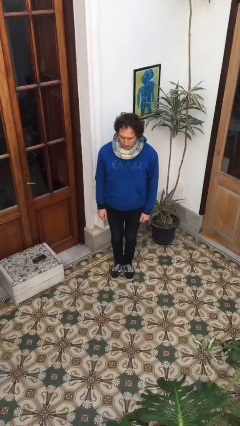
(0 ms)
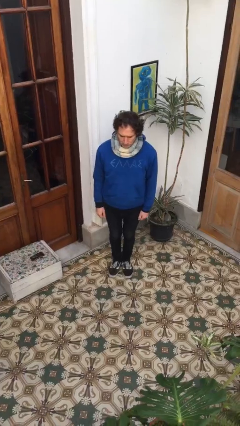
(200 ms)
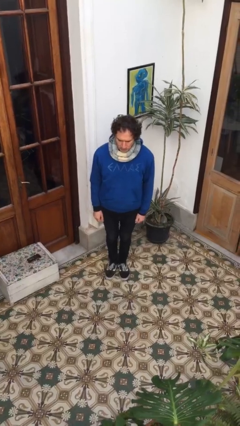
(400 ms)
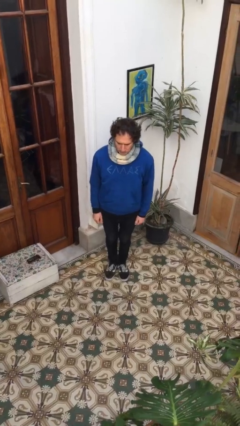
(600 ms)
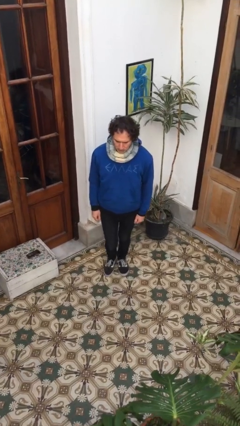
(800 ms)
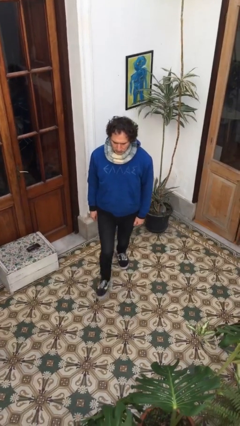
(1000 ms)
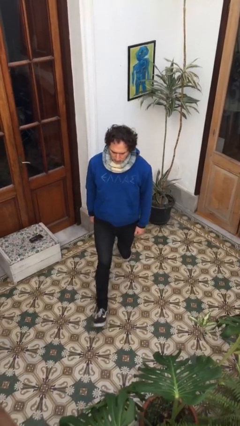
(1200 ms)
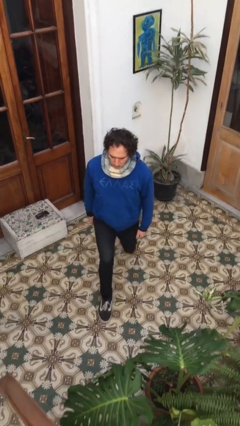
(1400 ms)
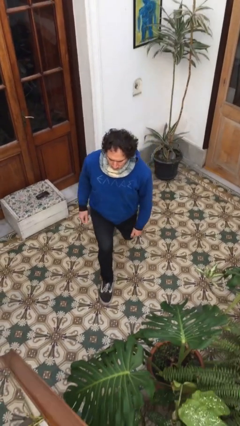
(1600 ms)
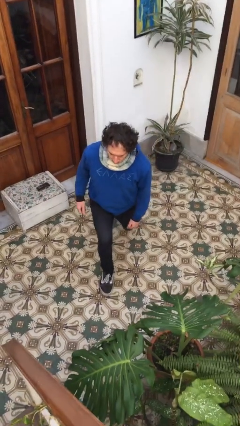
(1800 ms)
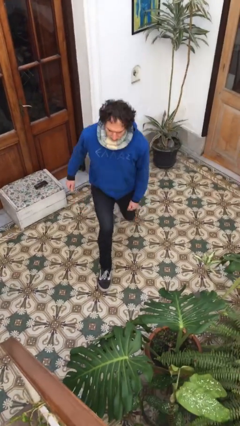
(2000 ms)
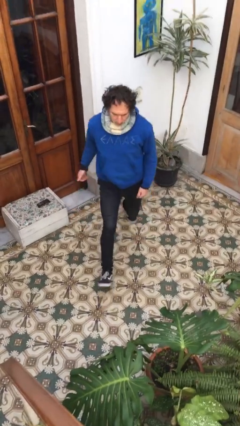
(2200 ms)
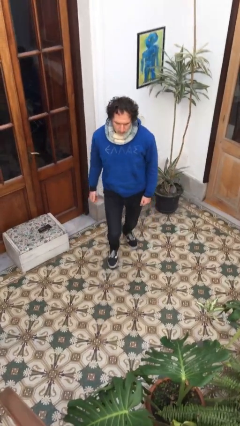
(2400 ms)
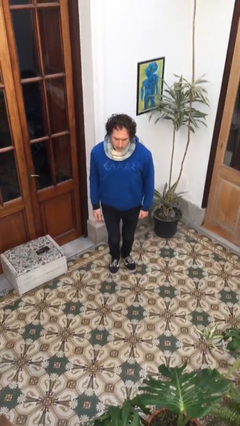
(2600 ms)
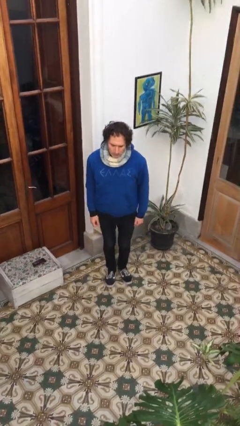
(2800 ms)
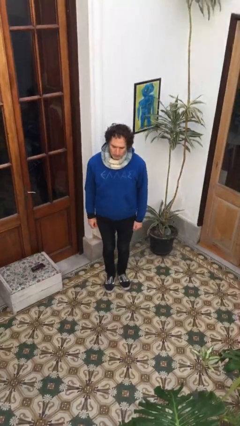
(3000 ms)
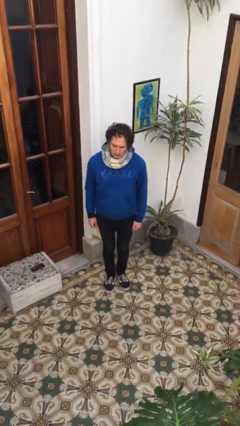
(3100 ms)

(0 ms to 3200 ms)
person exercises with lunges

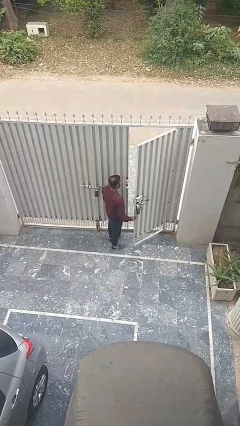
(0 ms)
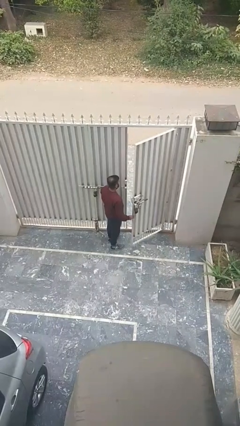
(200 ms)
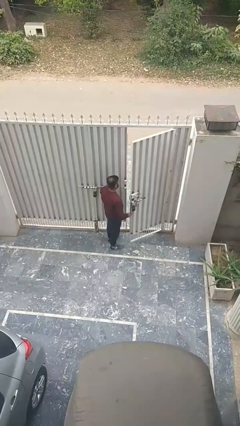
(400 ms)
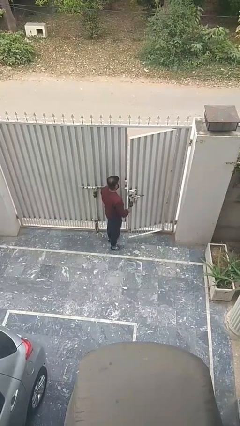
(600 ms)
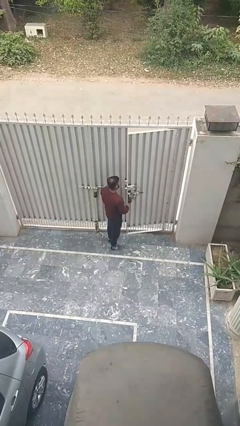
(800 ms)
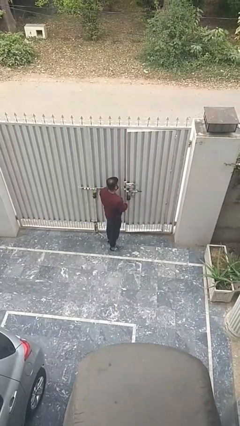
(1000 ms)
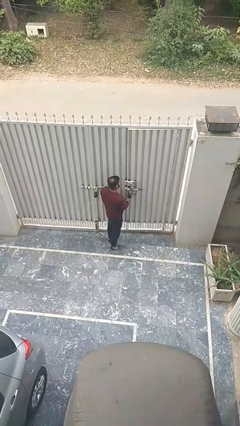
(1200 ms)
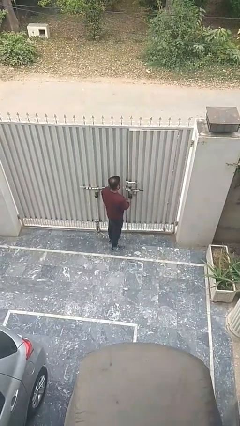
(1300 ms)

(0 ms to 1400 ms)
person closes facility door

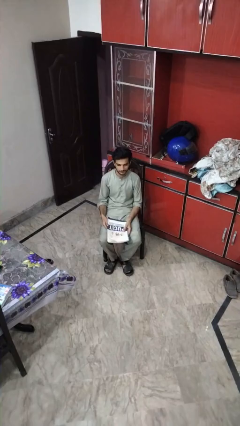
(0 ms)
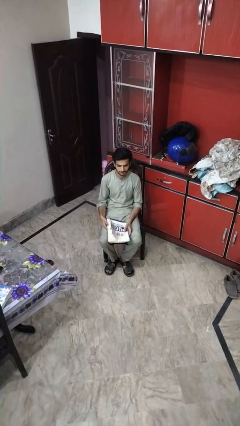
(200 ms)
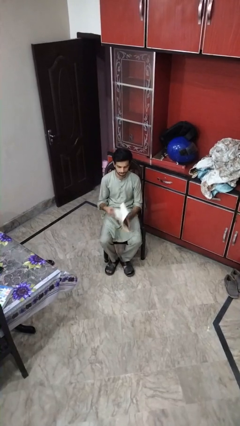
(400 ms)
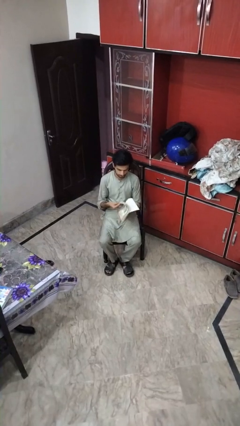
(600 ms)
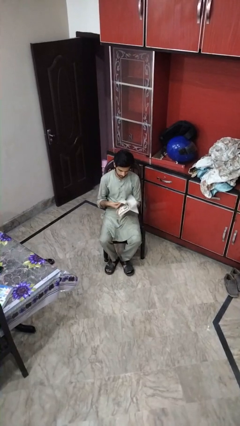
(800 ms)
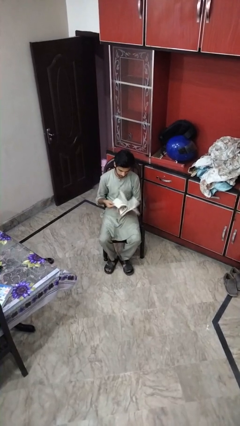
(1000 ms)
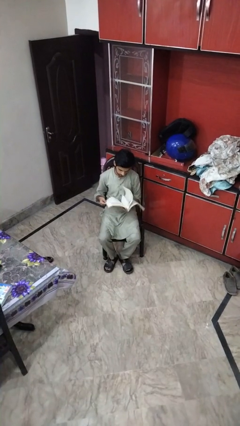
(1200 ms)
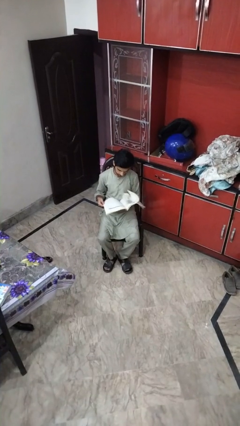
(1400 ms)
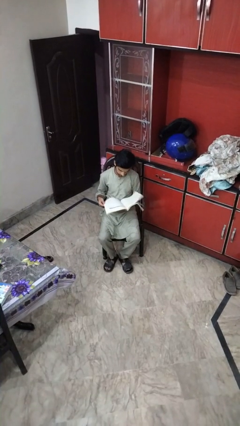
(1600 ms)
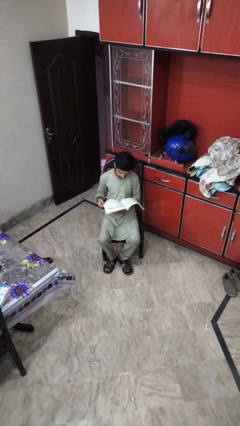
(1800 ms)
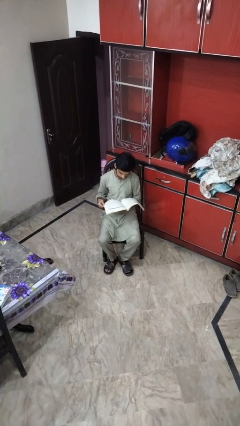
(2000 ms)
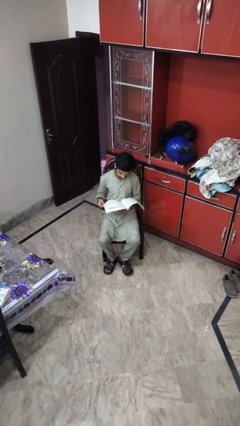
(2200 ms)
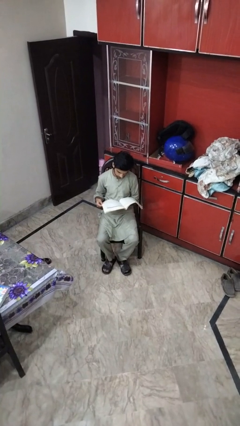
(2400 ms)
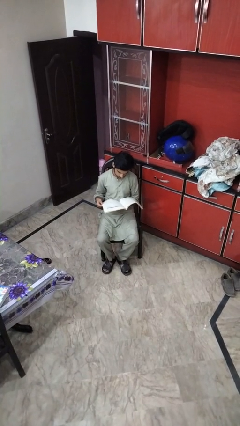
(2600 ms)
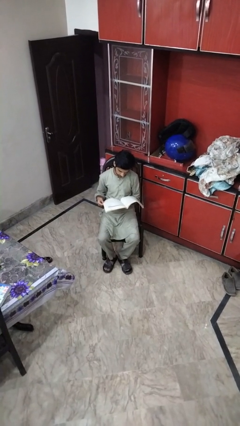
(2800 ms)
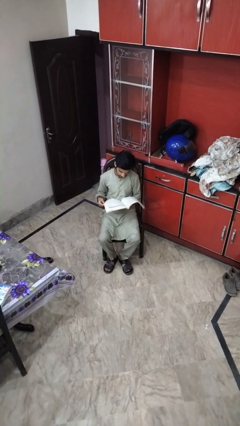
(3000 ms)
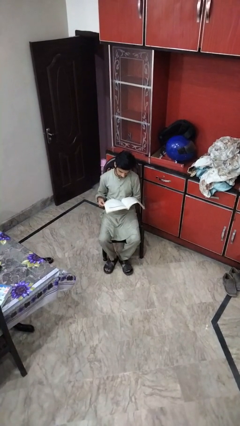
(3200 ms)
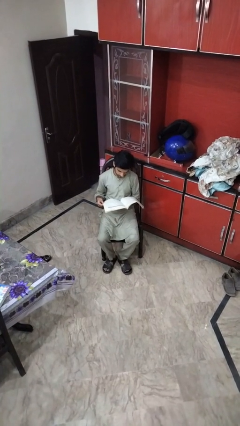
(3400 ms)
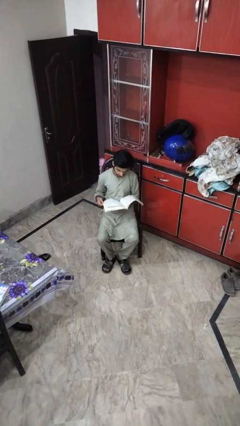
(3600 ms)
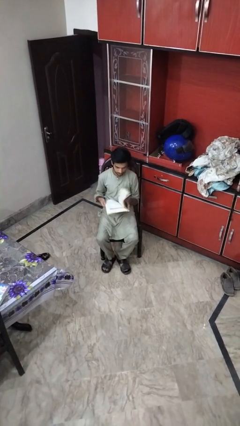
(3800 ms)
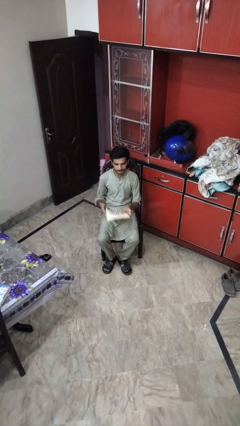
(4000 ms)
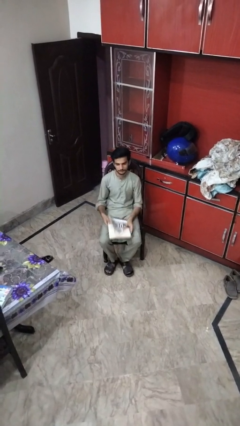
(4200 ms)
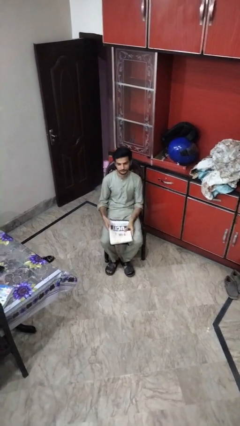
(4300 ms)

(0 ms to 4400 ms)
person reads magazine

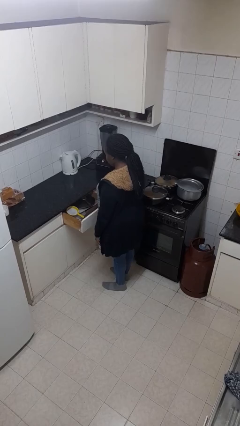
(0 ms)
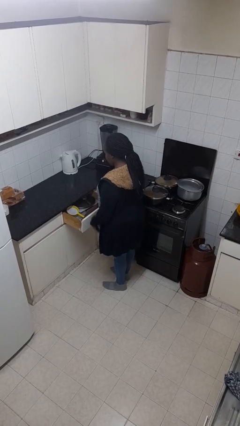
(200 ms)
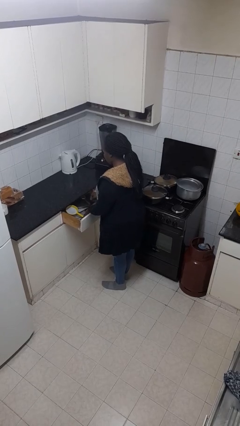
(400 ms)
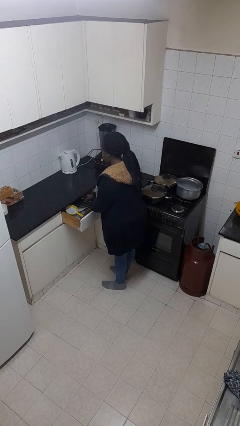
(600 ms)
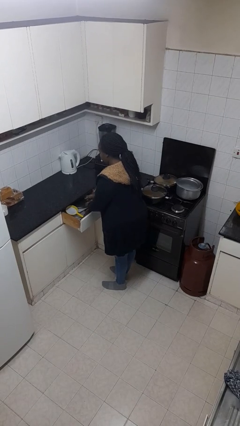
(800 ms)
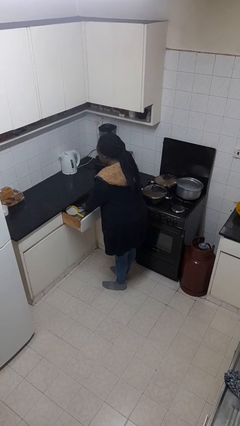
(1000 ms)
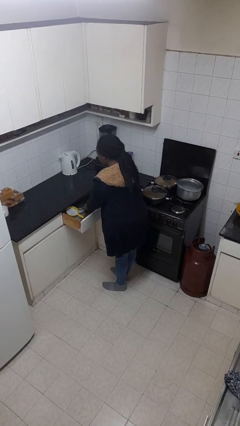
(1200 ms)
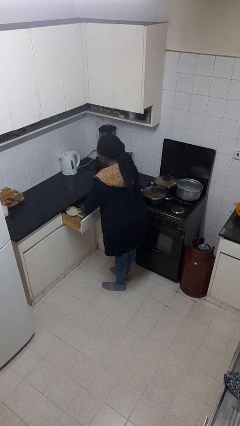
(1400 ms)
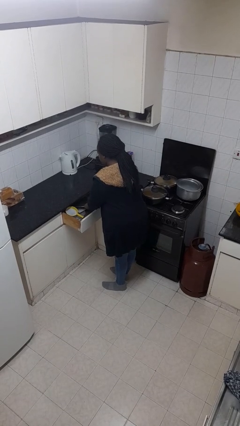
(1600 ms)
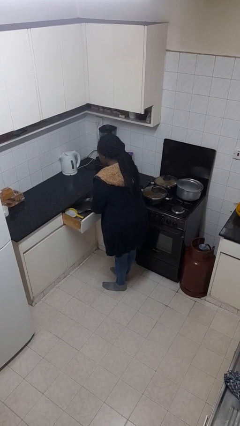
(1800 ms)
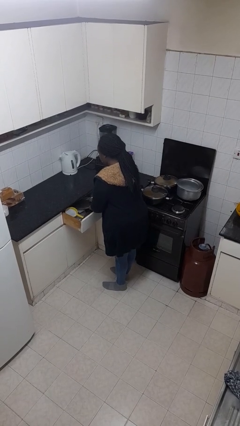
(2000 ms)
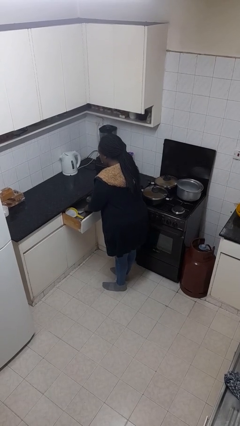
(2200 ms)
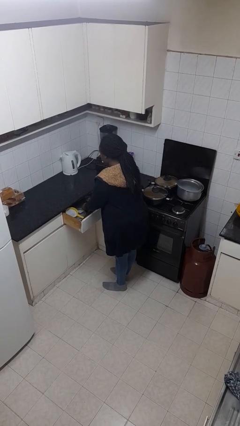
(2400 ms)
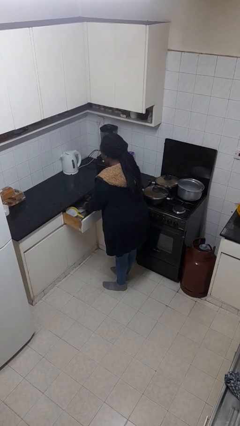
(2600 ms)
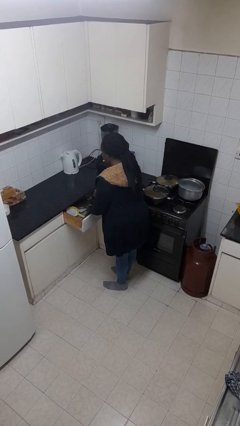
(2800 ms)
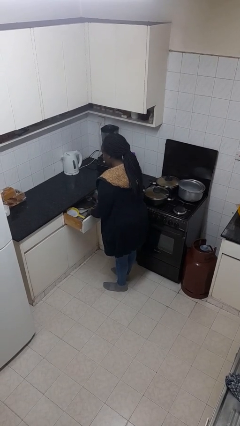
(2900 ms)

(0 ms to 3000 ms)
person searches in kitchen drawer

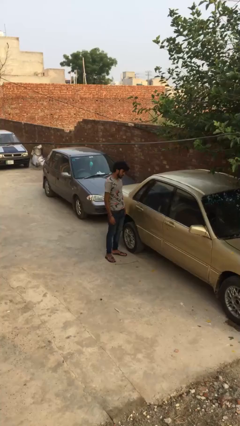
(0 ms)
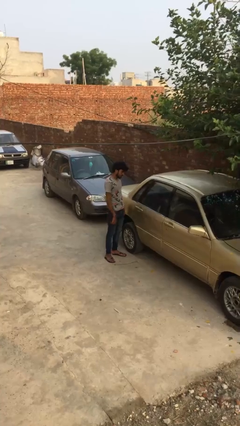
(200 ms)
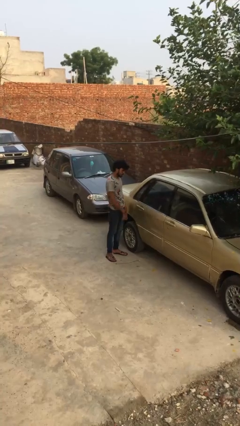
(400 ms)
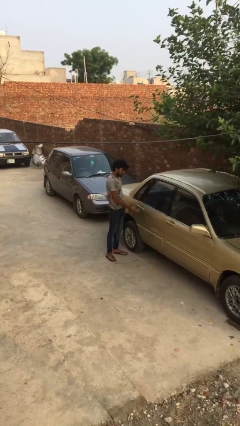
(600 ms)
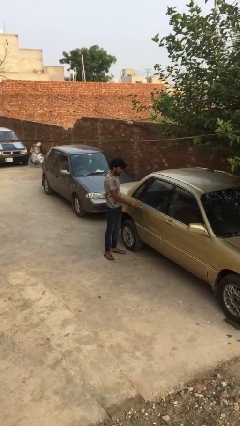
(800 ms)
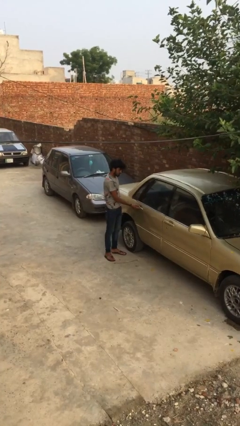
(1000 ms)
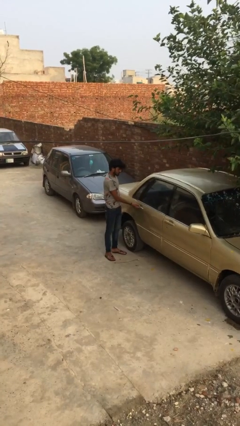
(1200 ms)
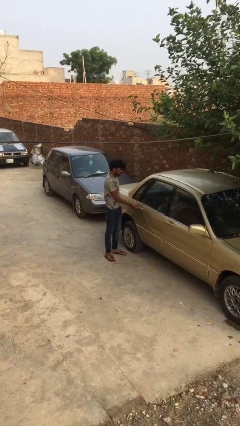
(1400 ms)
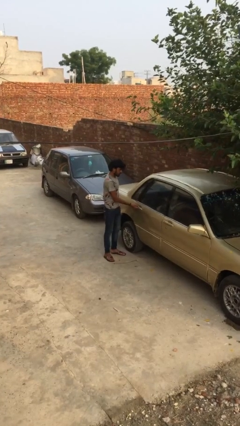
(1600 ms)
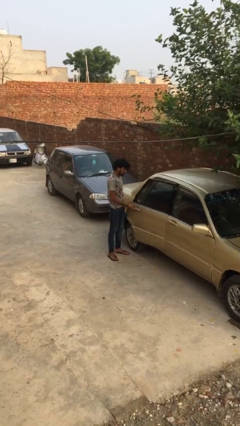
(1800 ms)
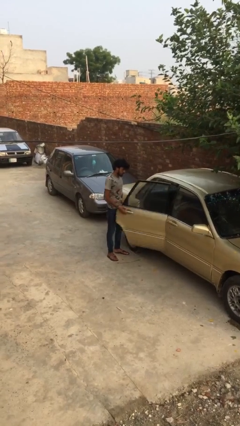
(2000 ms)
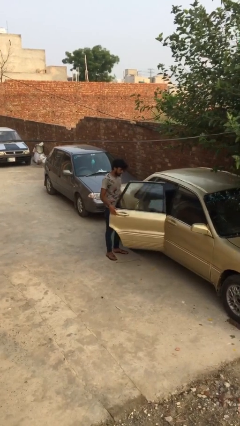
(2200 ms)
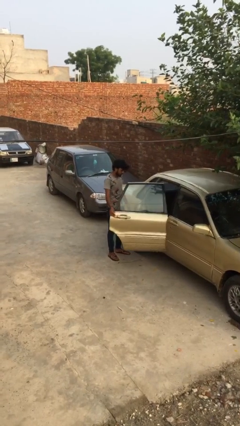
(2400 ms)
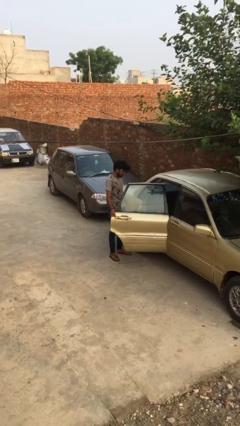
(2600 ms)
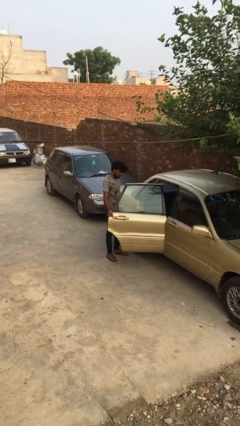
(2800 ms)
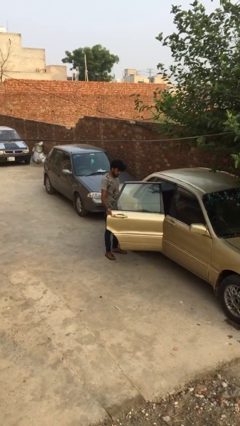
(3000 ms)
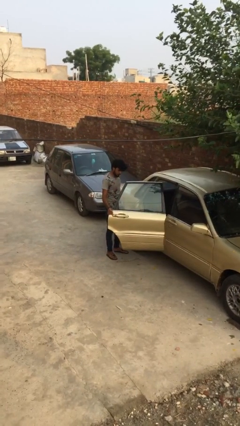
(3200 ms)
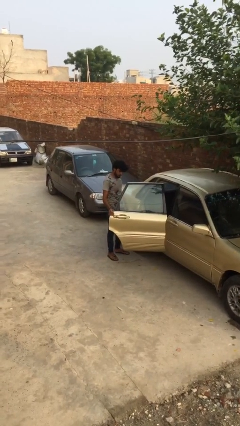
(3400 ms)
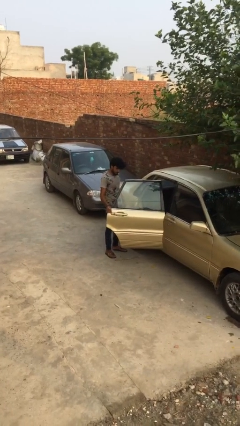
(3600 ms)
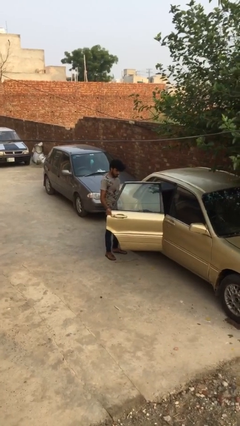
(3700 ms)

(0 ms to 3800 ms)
person opens car door

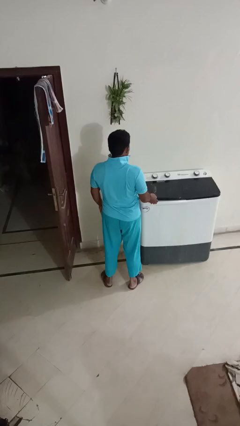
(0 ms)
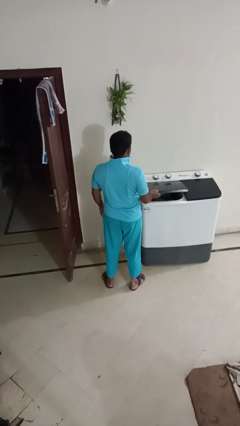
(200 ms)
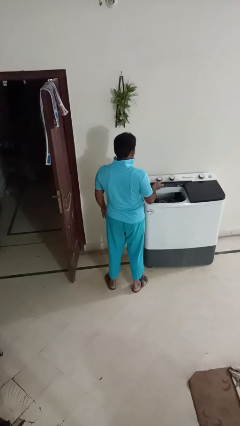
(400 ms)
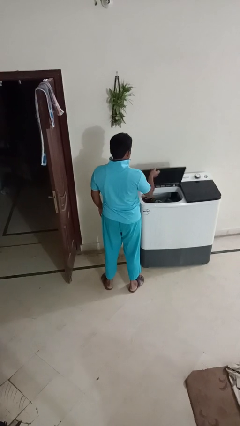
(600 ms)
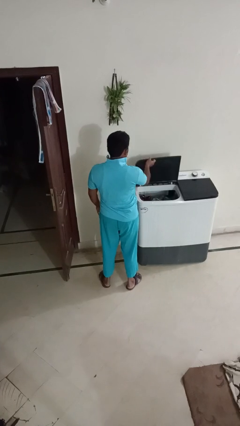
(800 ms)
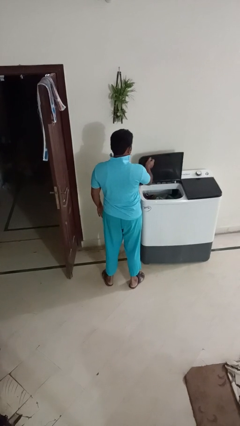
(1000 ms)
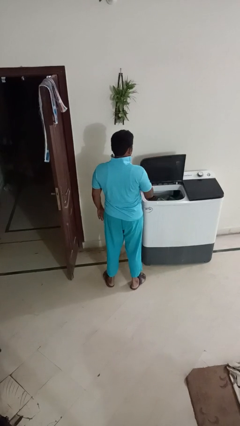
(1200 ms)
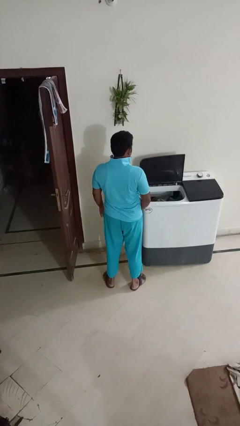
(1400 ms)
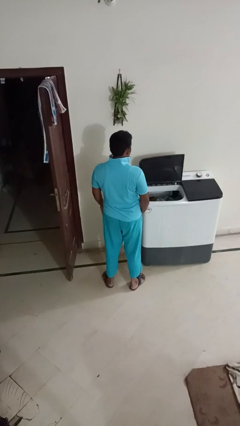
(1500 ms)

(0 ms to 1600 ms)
person opens clothes washer
